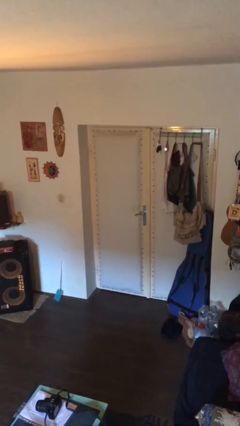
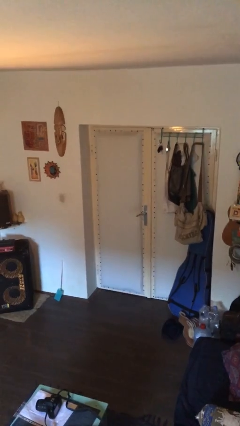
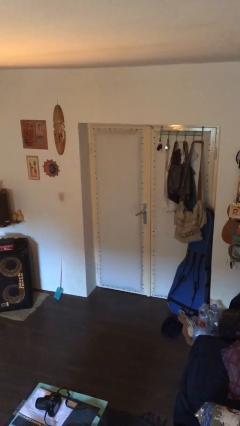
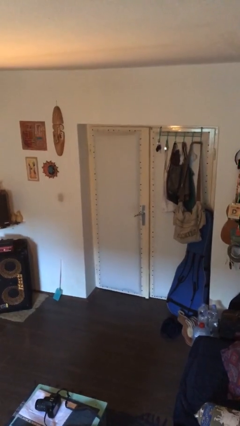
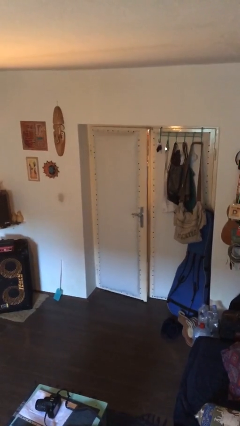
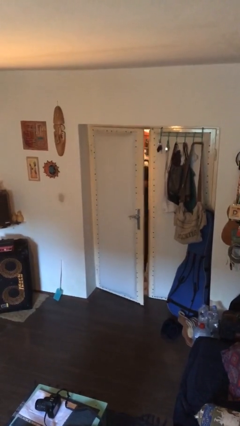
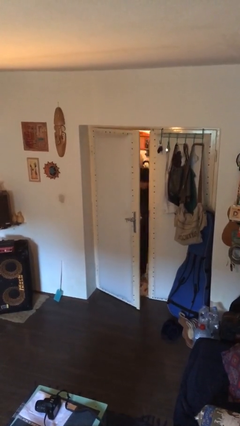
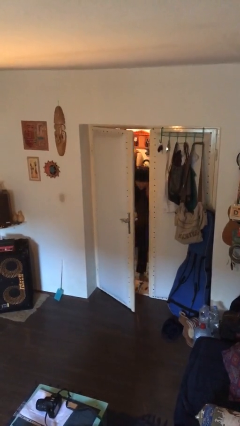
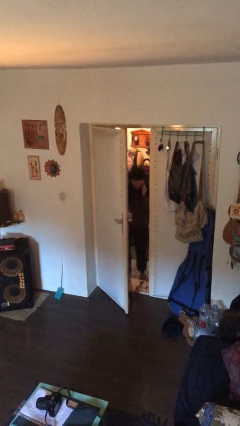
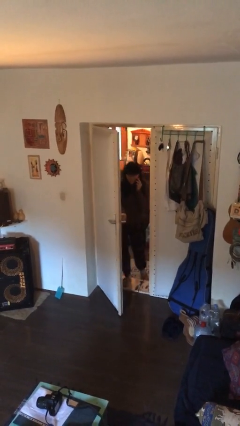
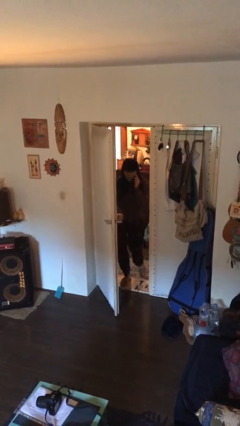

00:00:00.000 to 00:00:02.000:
person opens facility door

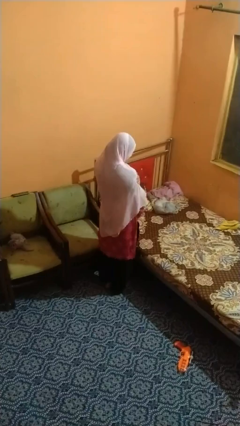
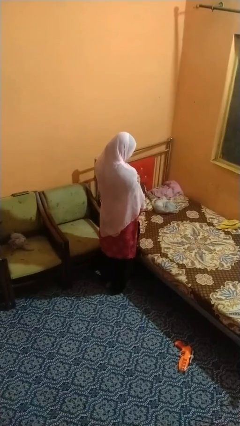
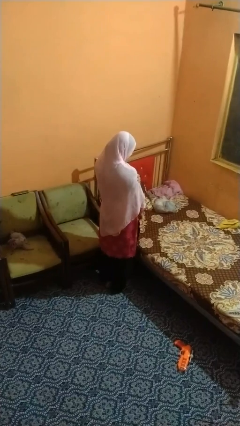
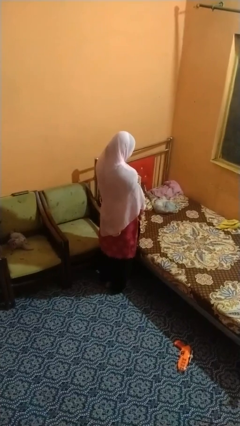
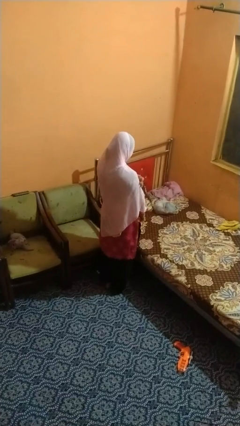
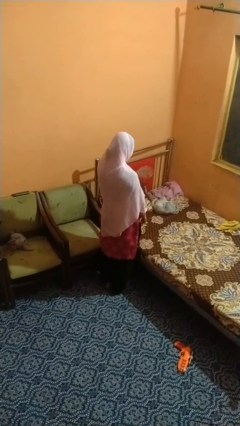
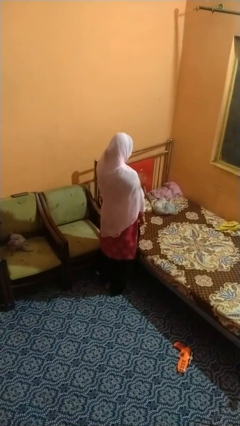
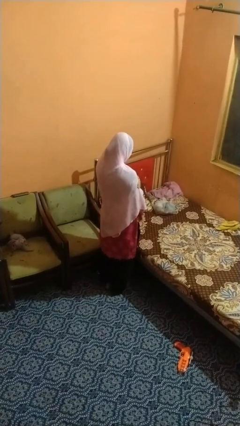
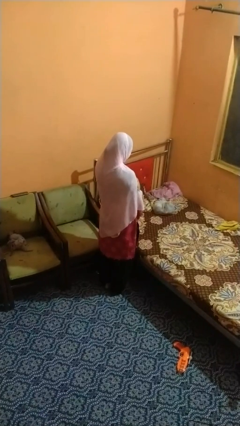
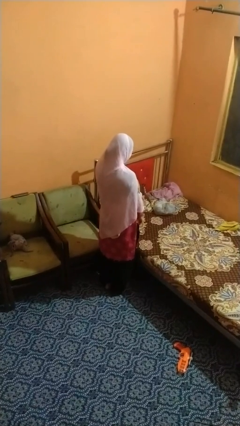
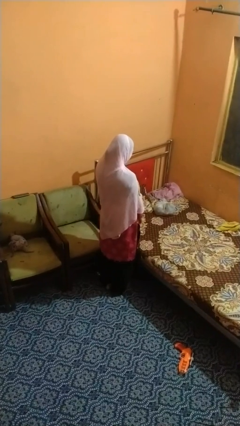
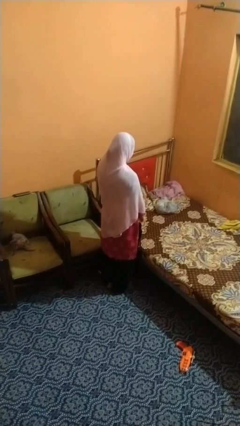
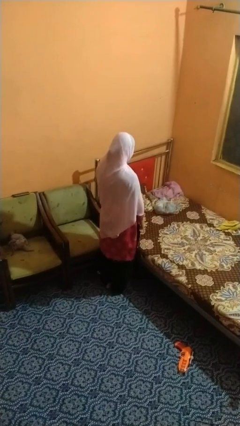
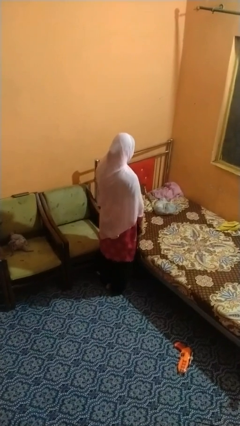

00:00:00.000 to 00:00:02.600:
person swats bug

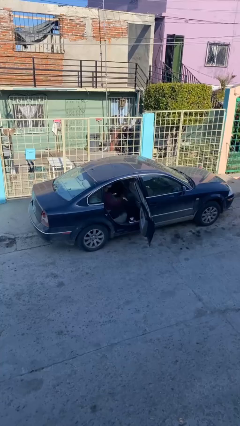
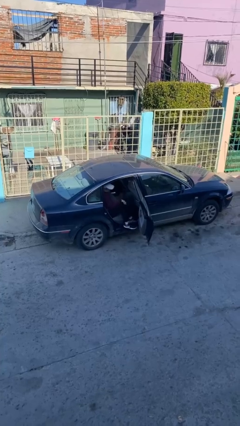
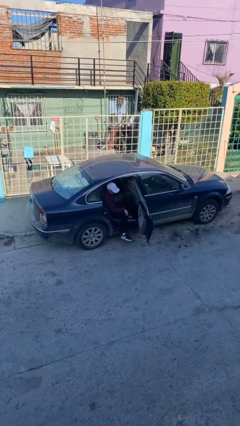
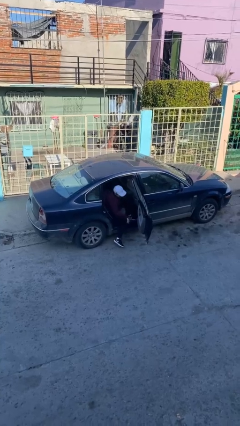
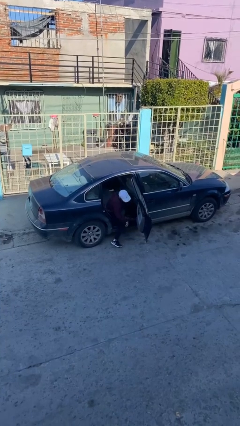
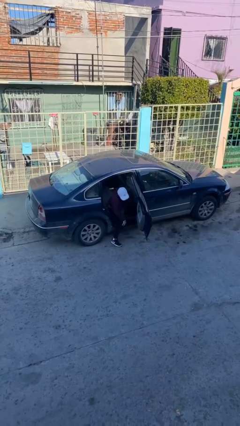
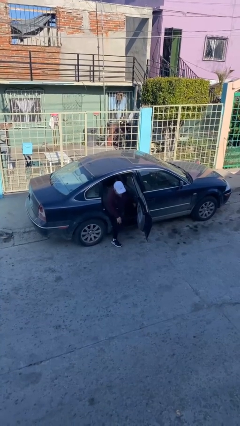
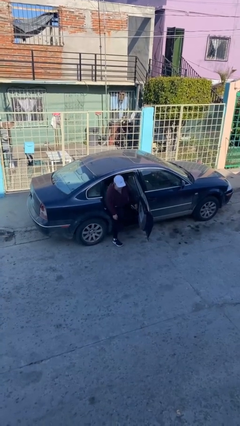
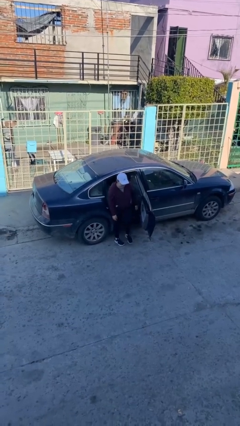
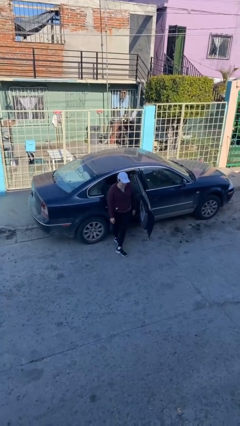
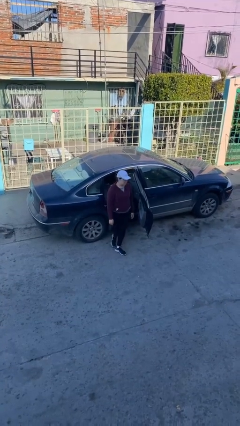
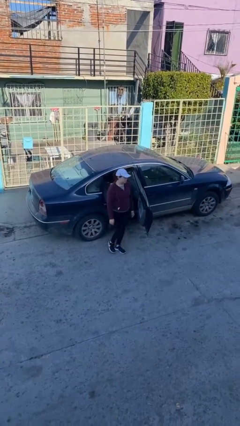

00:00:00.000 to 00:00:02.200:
person exits car

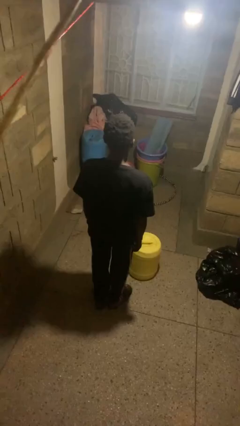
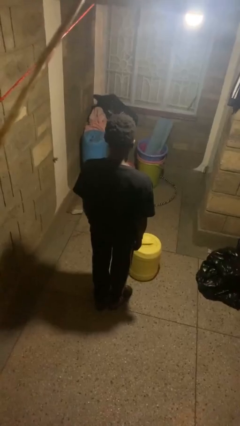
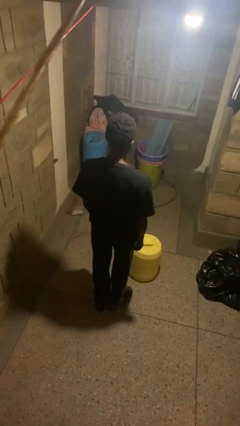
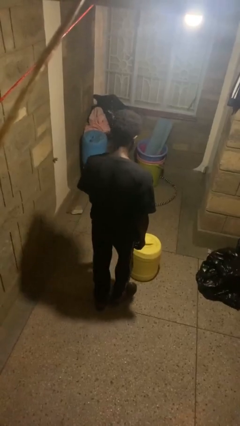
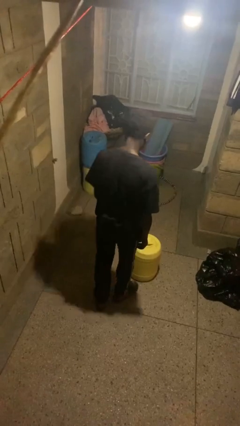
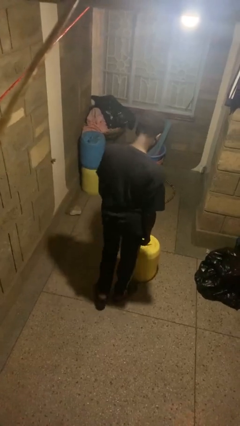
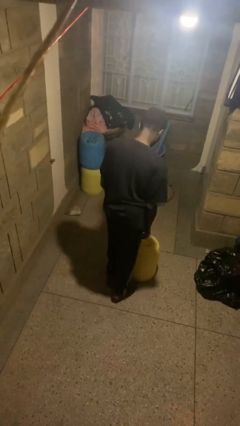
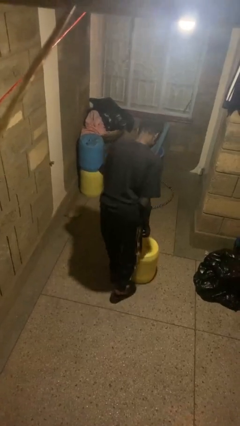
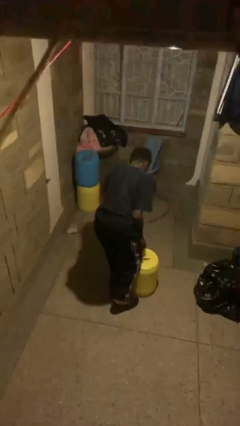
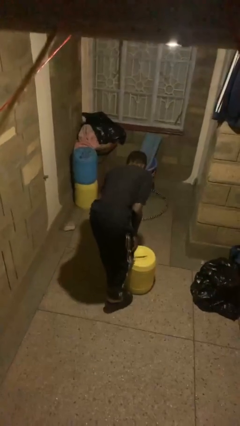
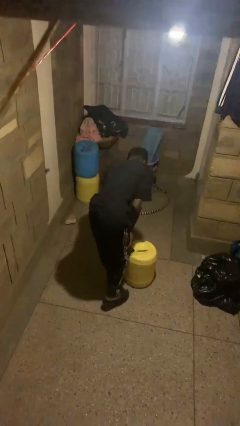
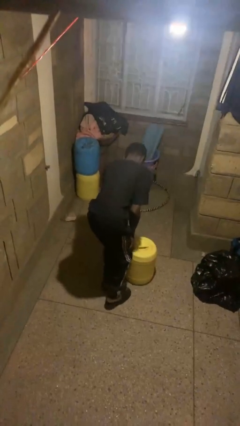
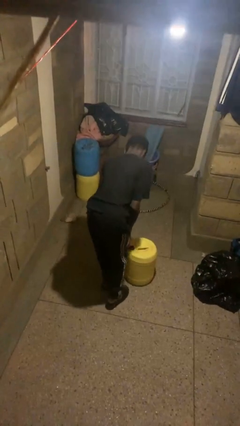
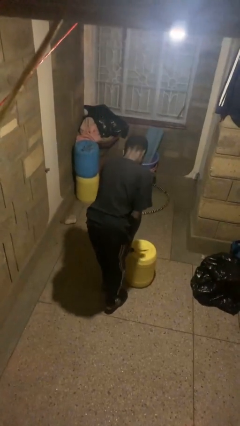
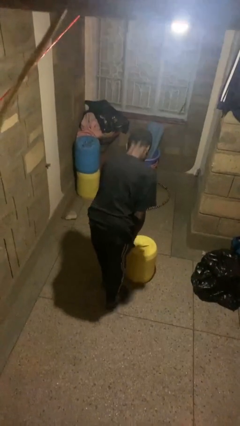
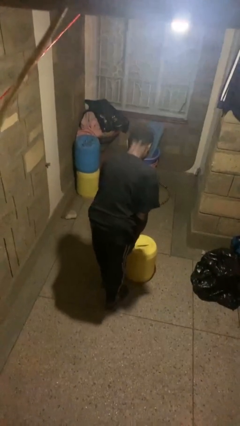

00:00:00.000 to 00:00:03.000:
person stubs toe

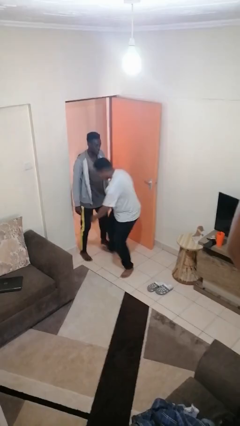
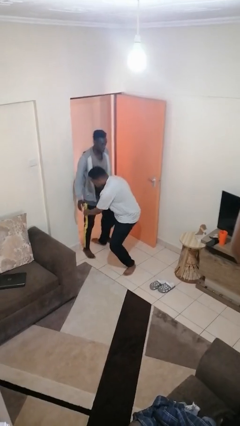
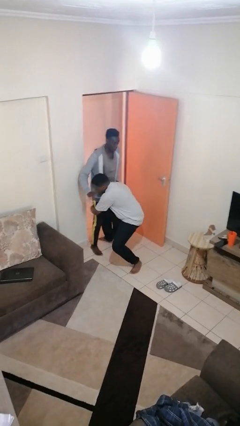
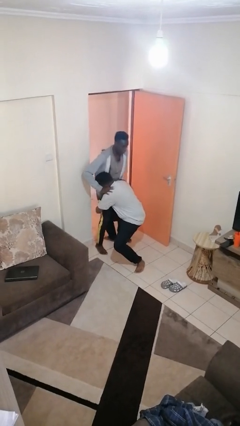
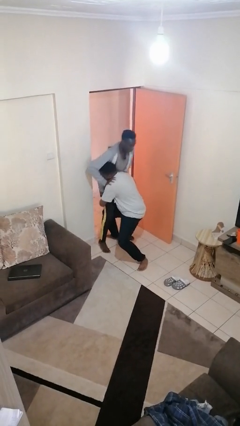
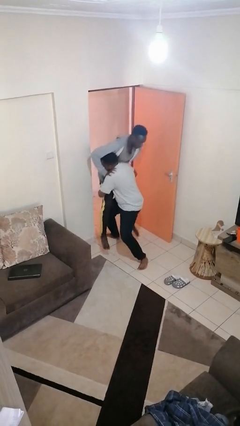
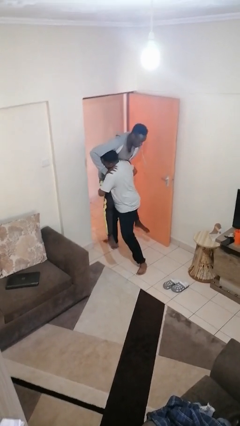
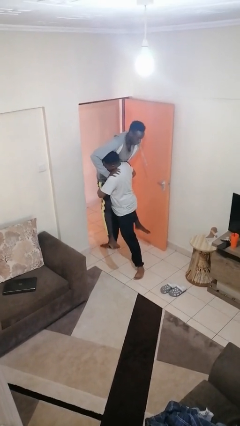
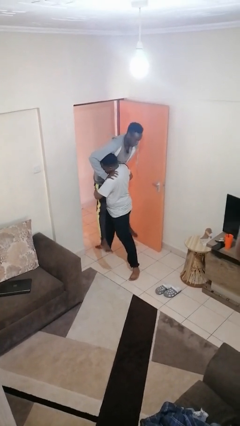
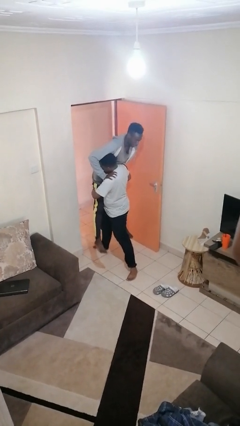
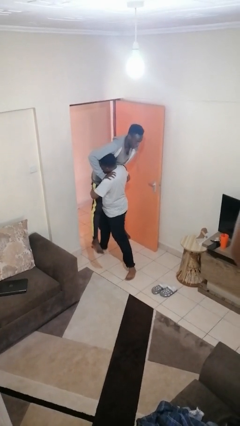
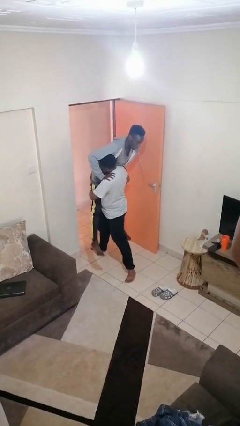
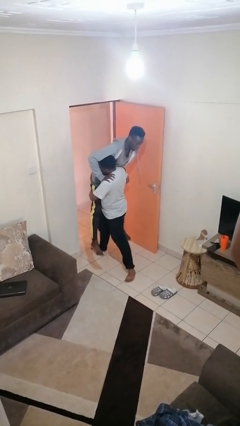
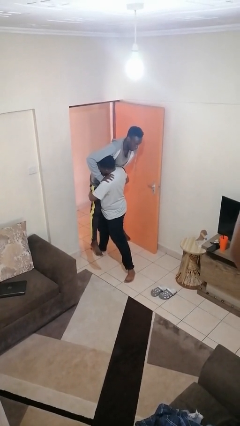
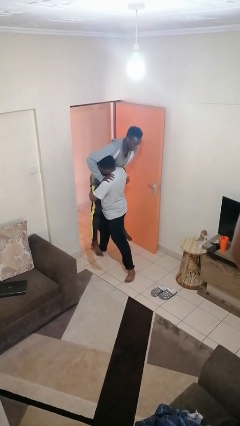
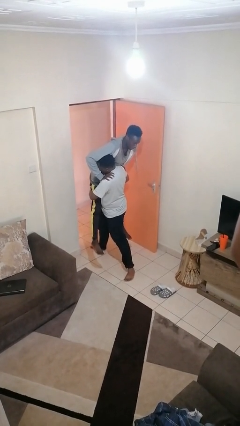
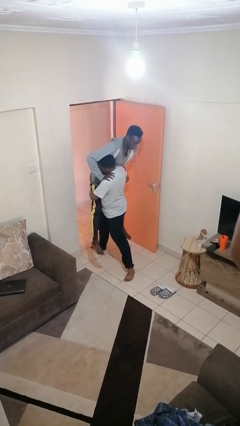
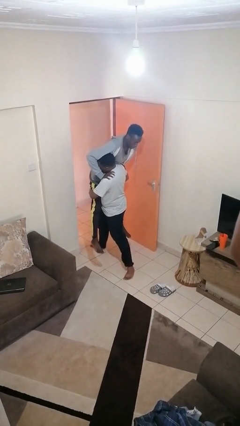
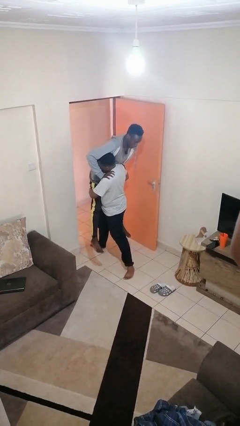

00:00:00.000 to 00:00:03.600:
person picks up person

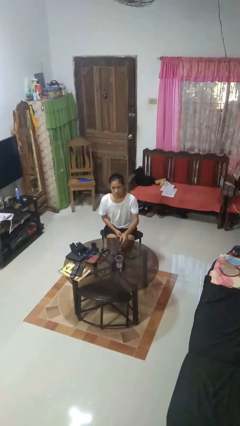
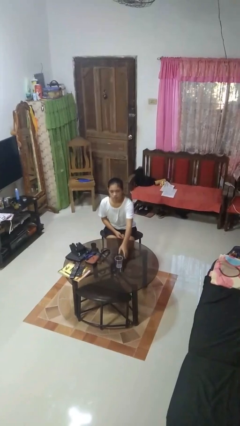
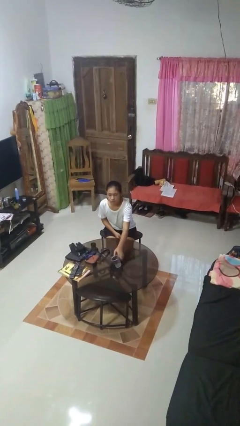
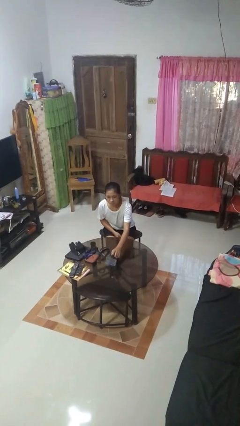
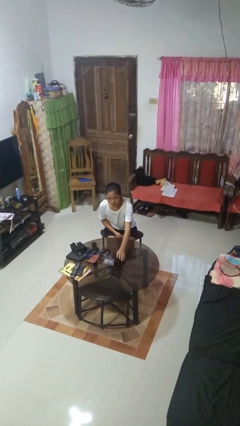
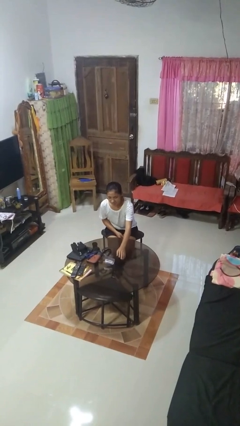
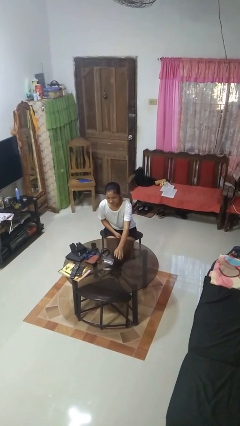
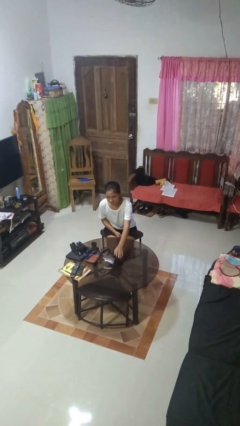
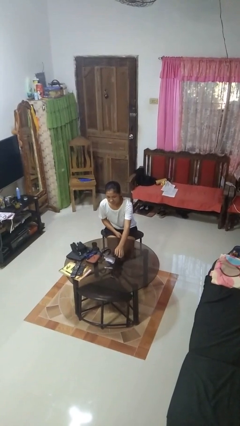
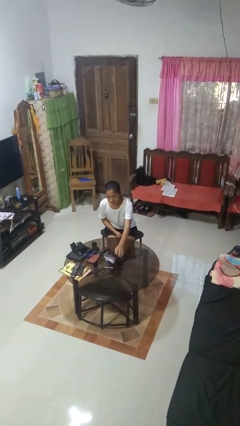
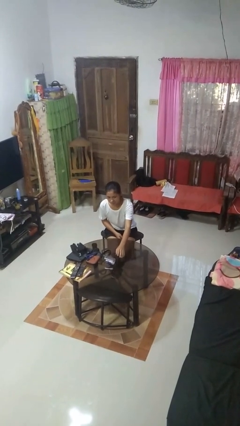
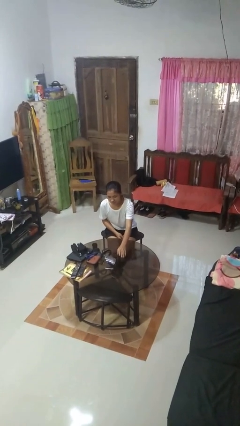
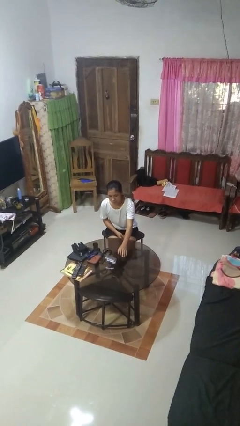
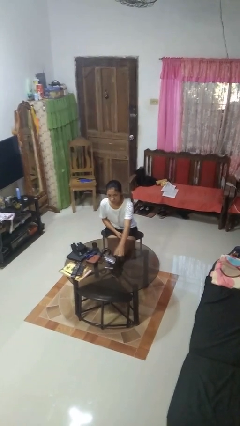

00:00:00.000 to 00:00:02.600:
person knocks over glass

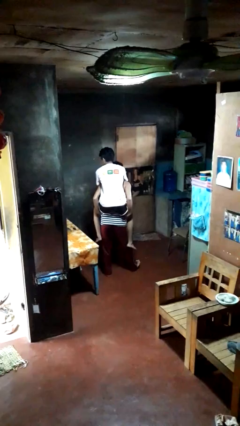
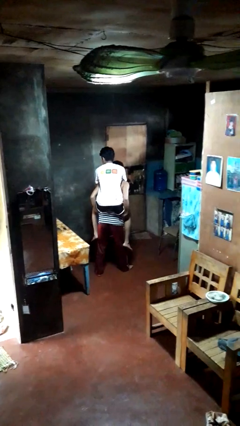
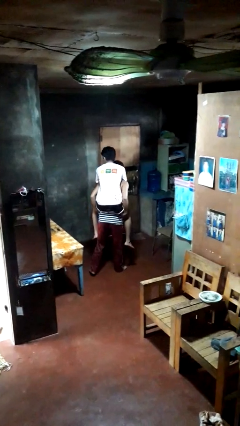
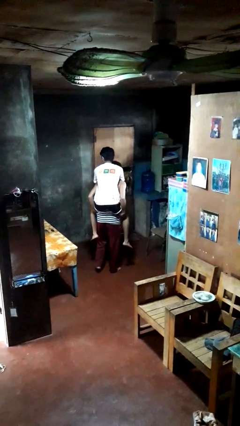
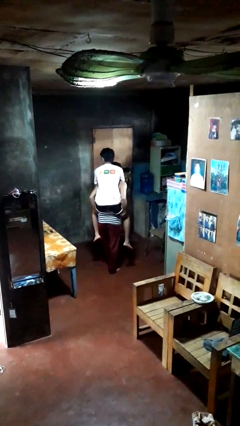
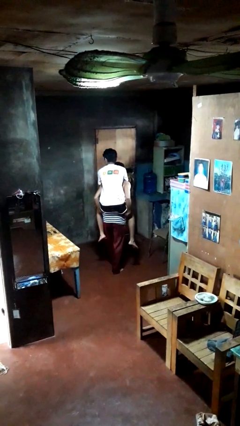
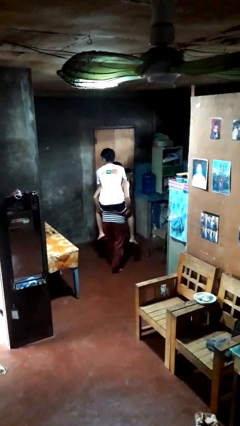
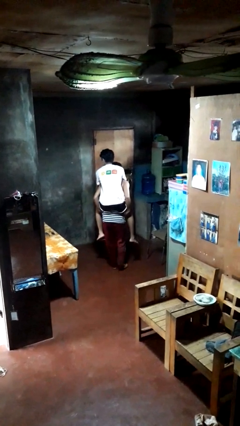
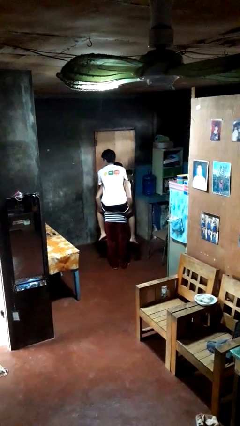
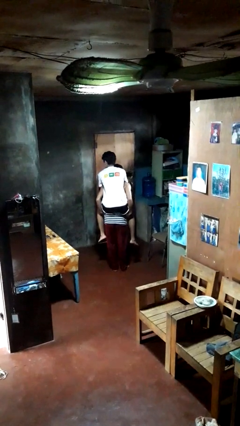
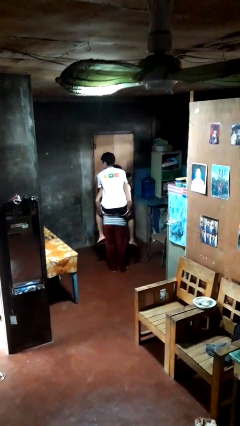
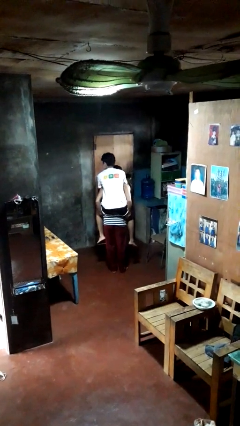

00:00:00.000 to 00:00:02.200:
person carries person on back
